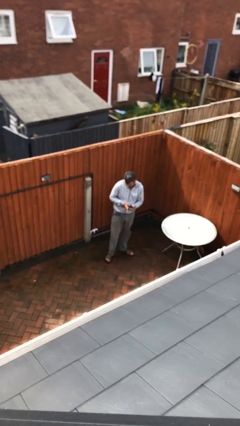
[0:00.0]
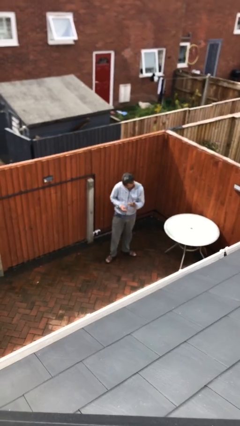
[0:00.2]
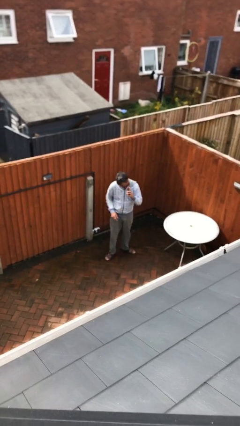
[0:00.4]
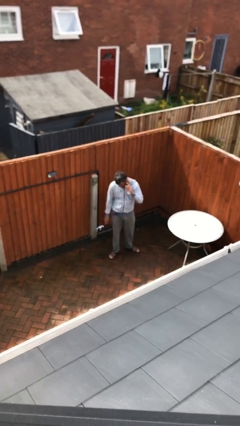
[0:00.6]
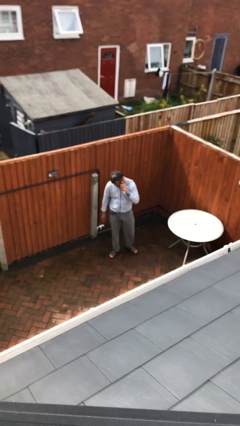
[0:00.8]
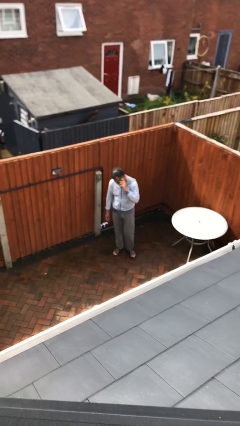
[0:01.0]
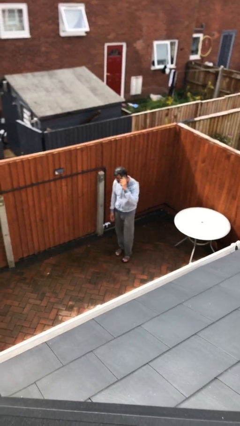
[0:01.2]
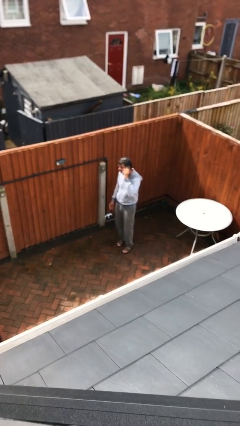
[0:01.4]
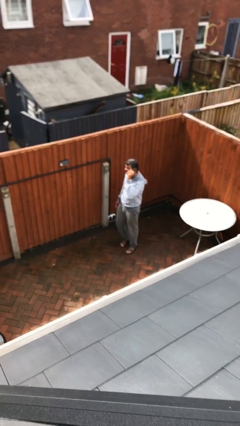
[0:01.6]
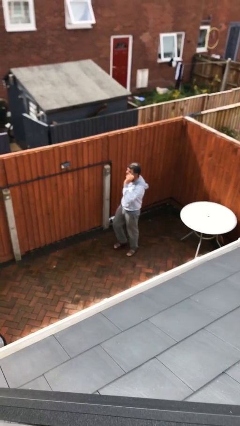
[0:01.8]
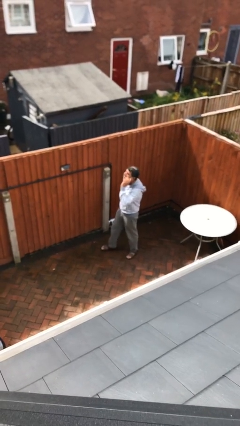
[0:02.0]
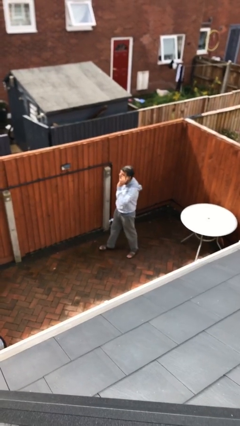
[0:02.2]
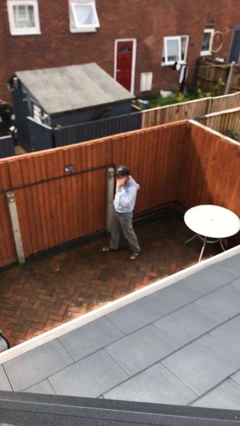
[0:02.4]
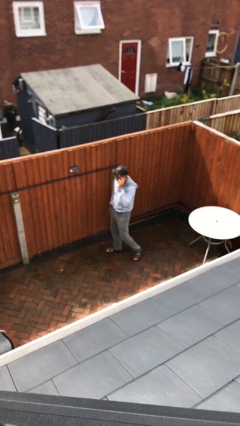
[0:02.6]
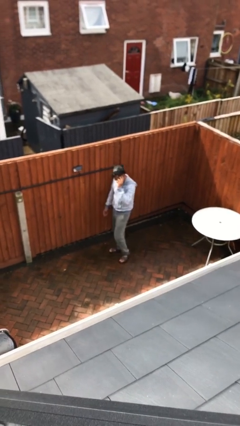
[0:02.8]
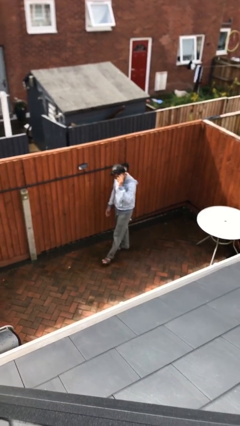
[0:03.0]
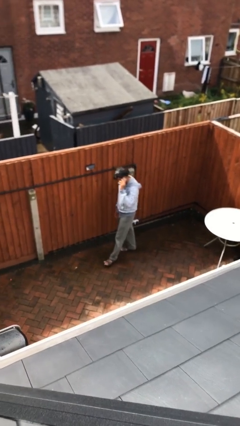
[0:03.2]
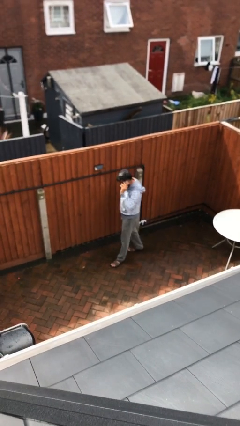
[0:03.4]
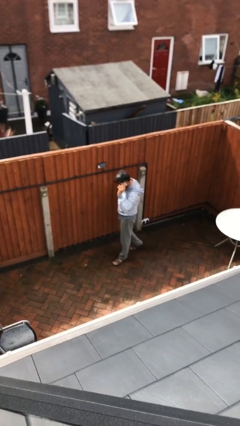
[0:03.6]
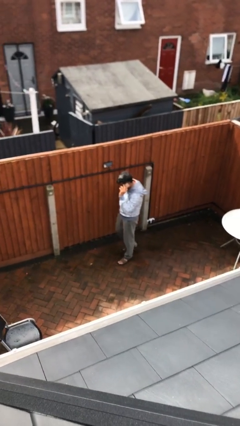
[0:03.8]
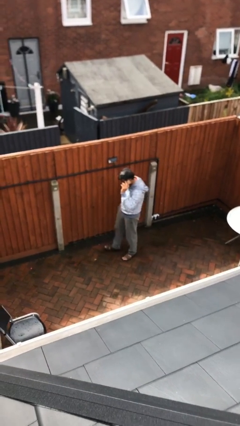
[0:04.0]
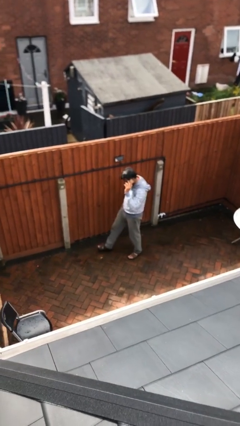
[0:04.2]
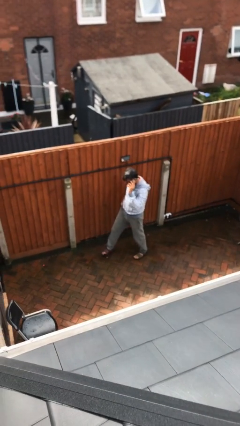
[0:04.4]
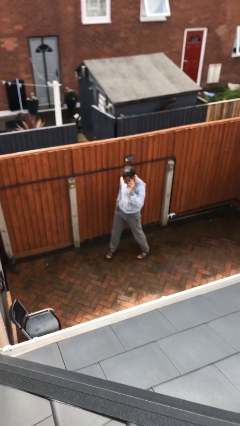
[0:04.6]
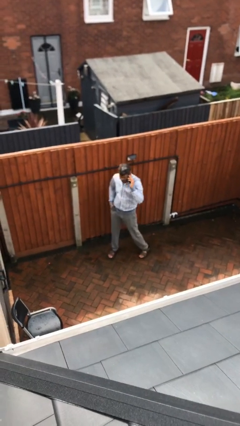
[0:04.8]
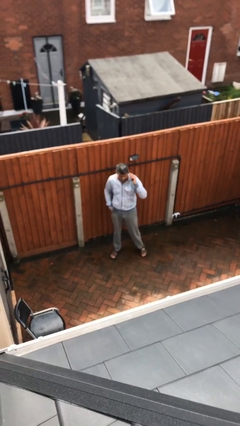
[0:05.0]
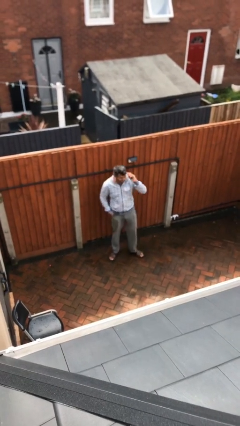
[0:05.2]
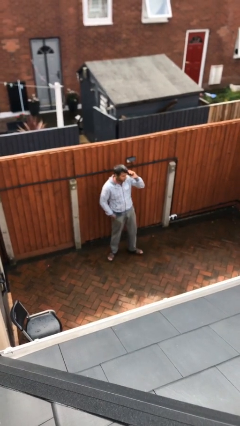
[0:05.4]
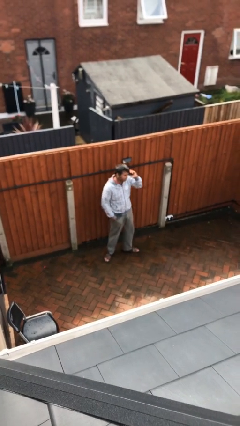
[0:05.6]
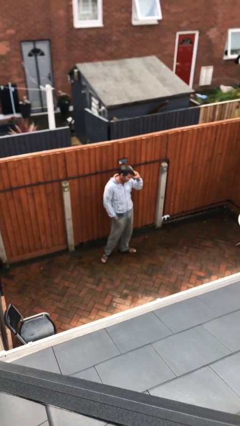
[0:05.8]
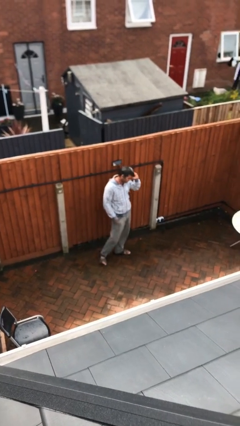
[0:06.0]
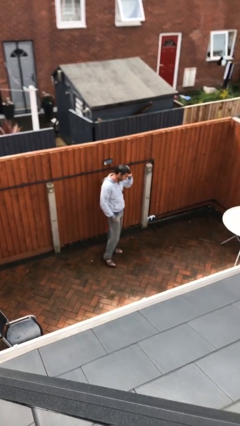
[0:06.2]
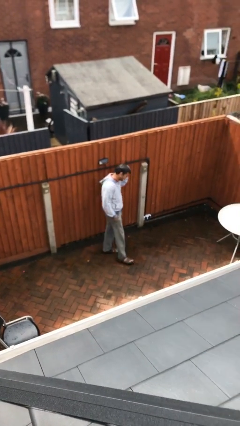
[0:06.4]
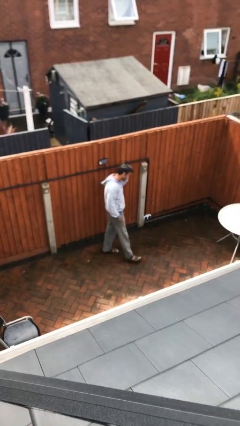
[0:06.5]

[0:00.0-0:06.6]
person talks on phone

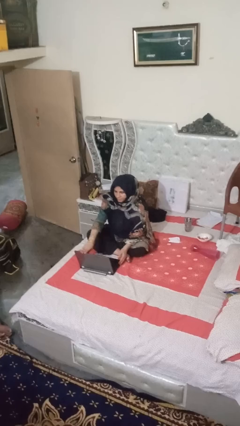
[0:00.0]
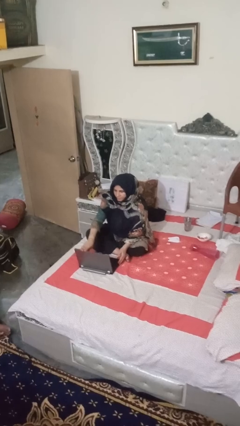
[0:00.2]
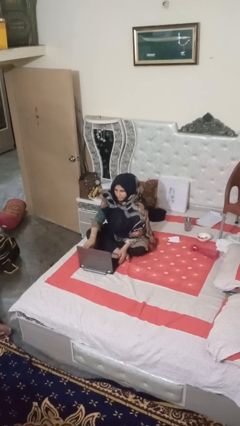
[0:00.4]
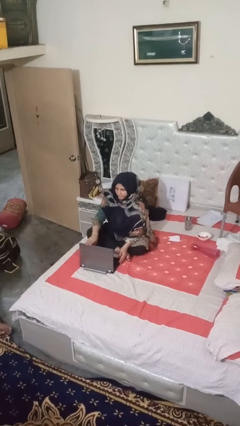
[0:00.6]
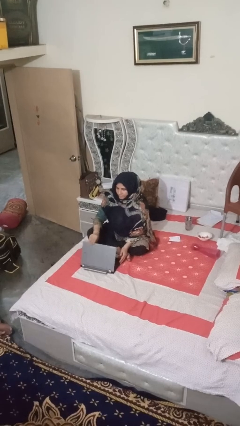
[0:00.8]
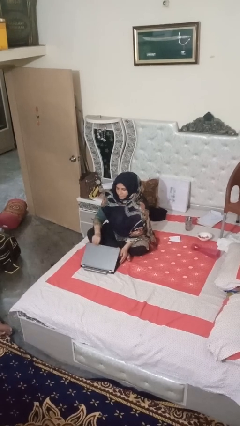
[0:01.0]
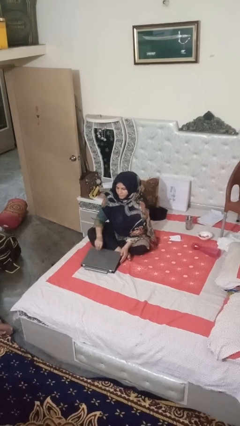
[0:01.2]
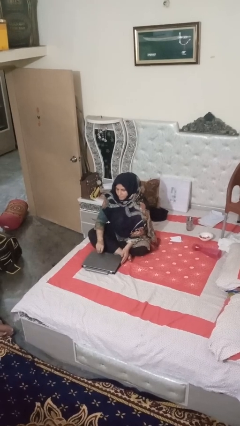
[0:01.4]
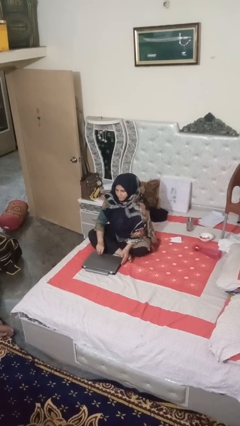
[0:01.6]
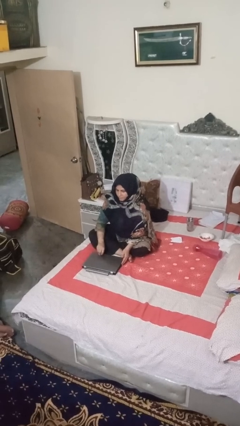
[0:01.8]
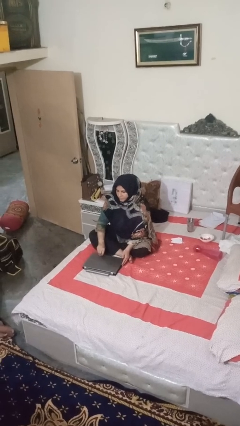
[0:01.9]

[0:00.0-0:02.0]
person closes laptop

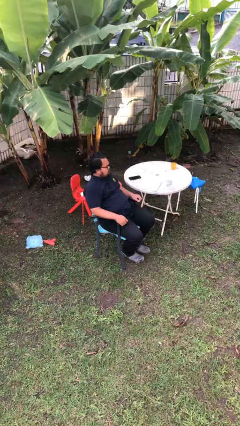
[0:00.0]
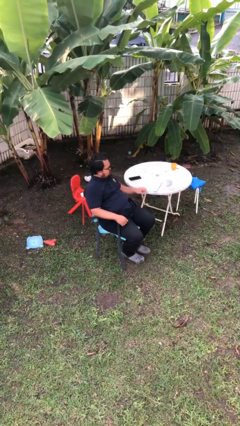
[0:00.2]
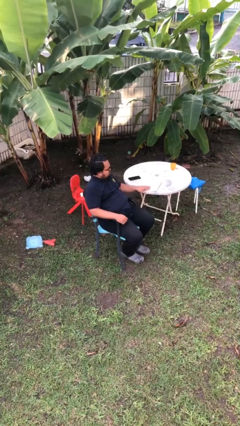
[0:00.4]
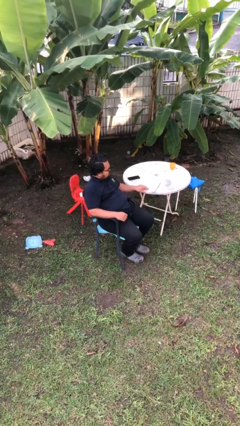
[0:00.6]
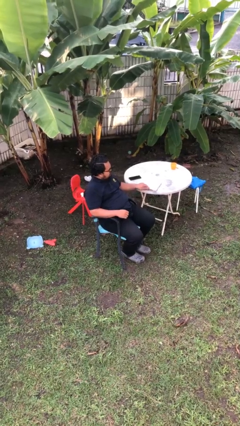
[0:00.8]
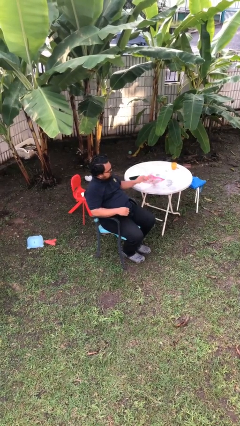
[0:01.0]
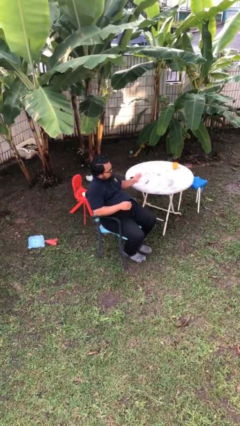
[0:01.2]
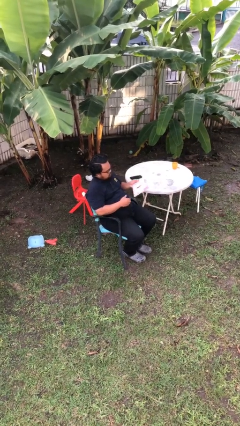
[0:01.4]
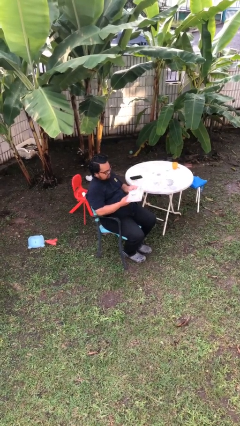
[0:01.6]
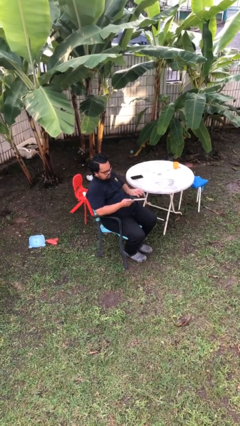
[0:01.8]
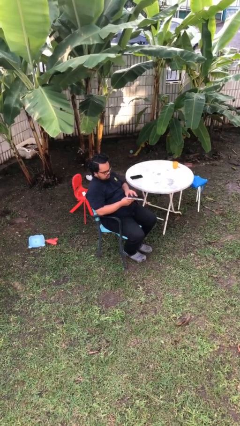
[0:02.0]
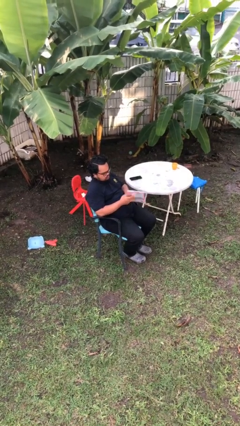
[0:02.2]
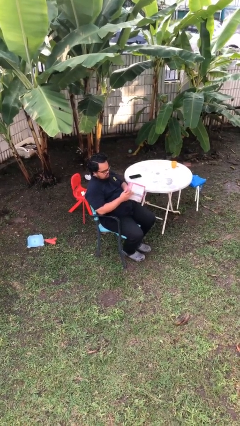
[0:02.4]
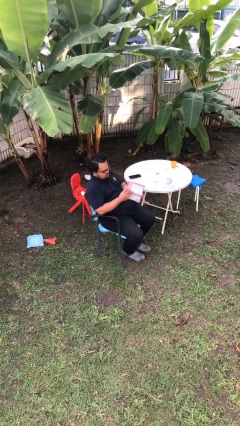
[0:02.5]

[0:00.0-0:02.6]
person picks up object from table

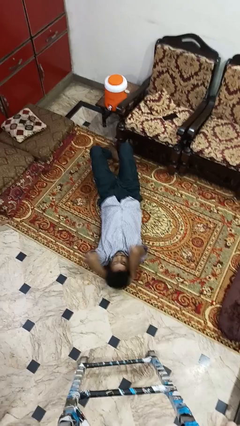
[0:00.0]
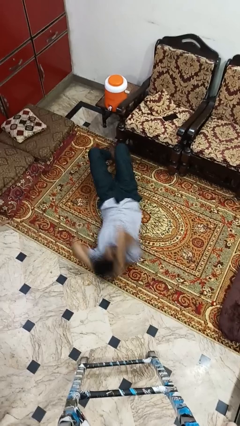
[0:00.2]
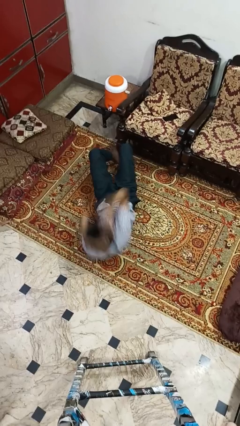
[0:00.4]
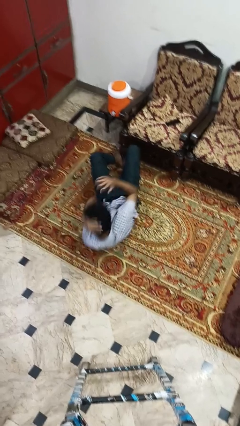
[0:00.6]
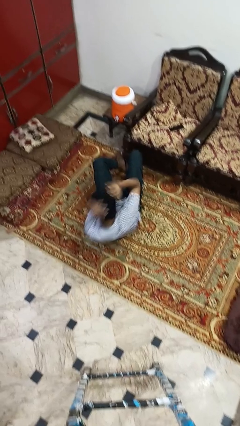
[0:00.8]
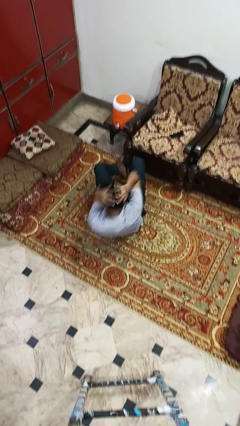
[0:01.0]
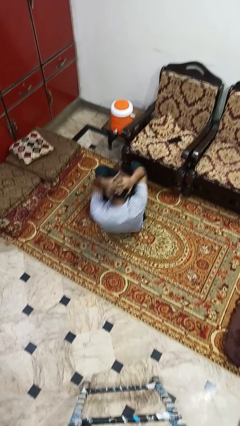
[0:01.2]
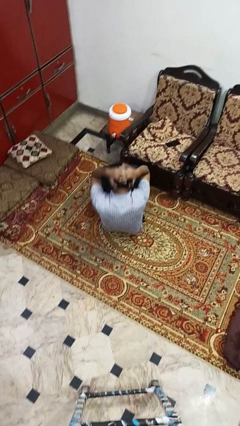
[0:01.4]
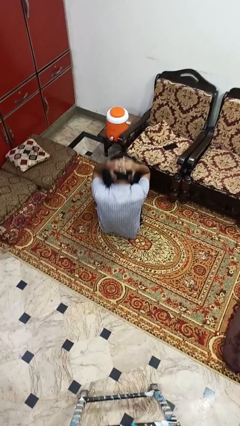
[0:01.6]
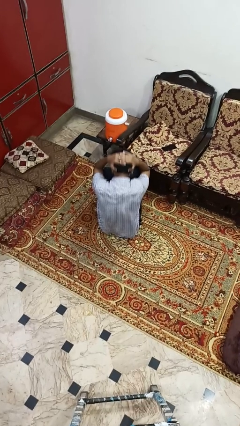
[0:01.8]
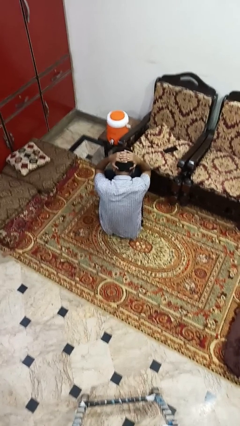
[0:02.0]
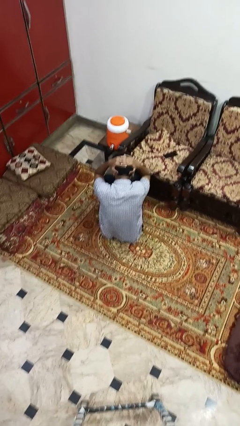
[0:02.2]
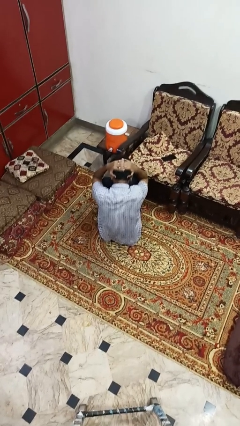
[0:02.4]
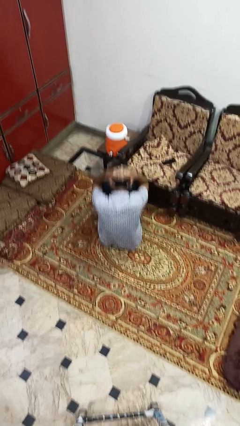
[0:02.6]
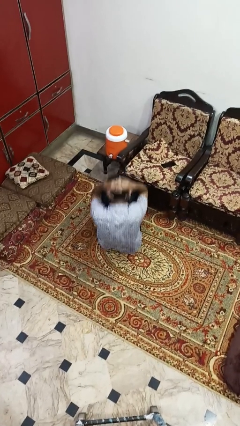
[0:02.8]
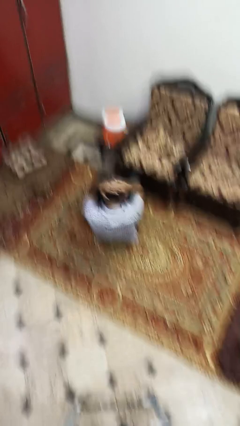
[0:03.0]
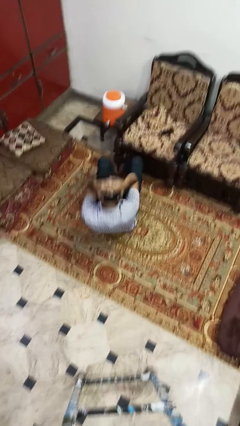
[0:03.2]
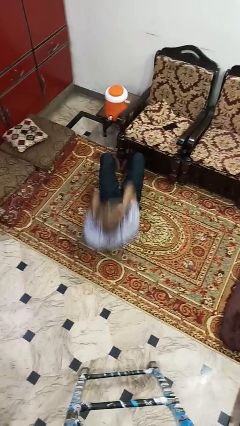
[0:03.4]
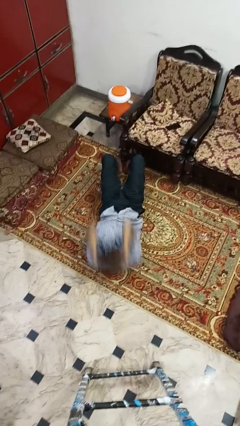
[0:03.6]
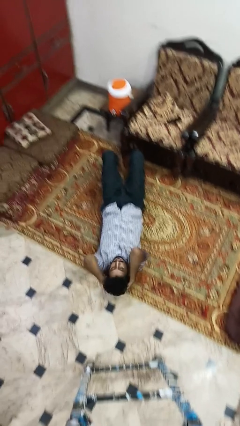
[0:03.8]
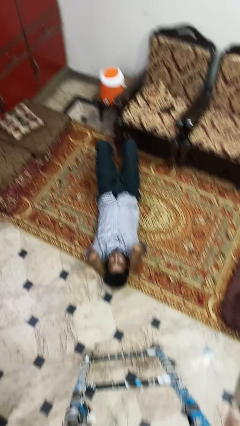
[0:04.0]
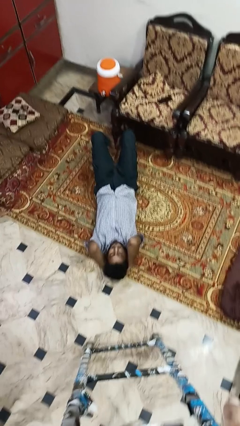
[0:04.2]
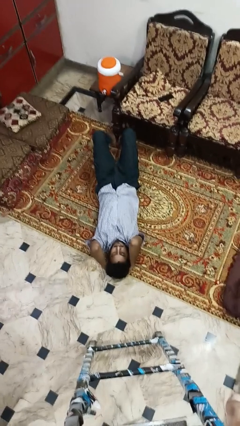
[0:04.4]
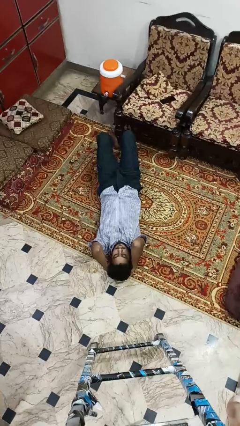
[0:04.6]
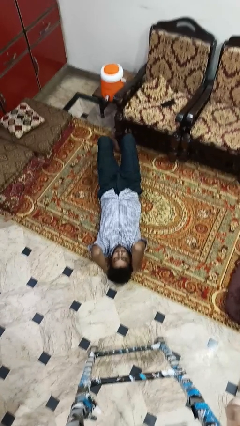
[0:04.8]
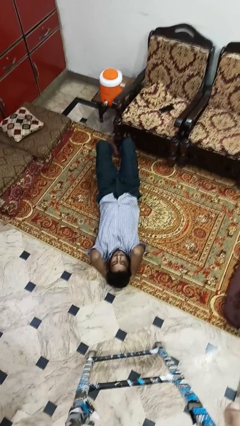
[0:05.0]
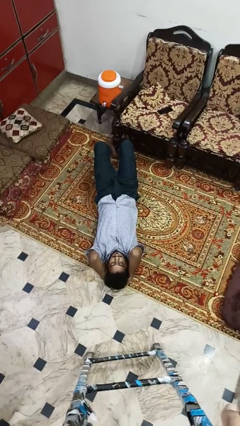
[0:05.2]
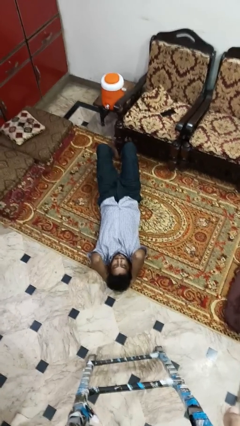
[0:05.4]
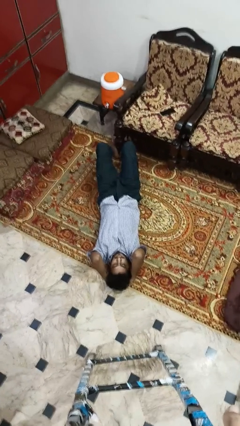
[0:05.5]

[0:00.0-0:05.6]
person exercises with situp

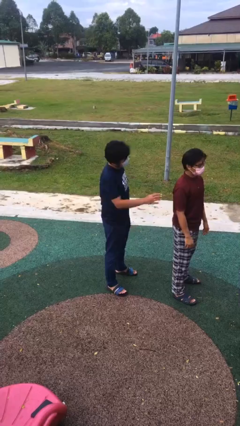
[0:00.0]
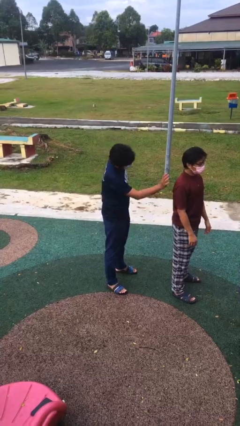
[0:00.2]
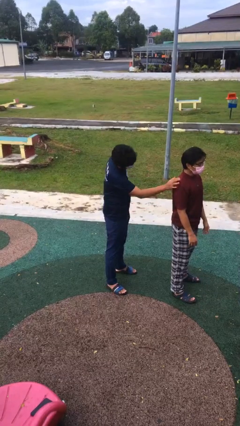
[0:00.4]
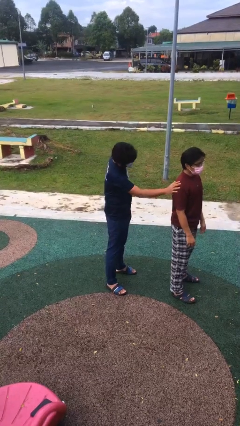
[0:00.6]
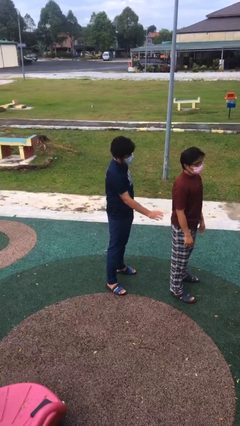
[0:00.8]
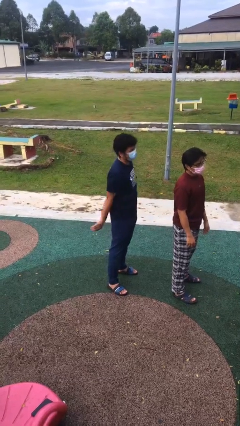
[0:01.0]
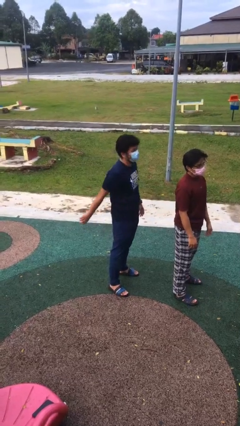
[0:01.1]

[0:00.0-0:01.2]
person touches back of person
